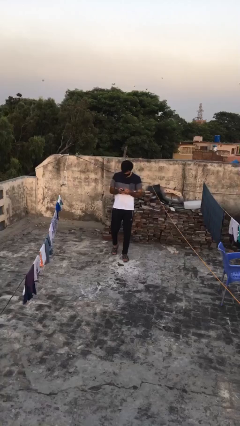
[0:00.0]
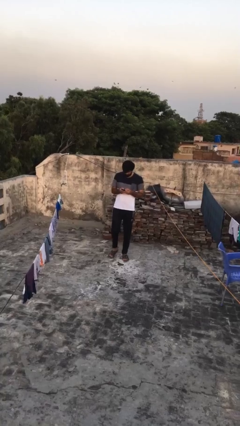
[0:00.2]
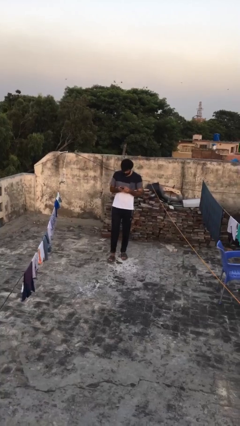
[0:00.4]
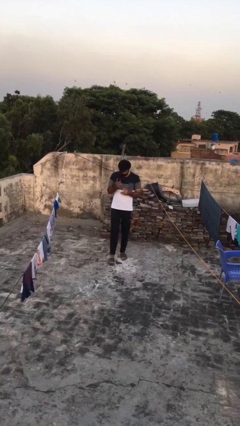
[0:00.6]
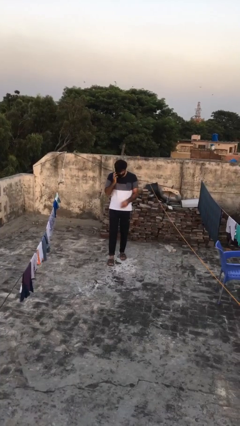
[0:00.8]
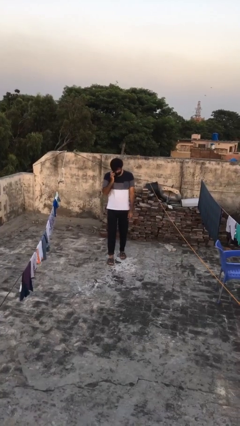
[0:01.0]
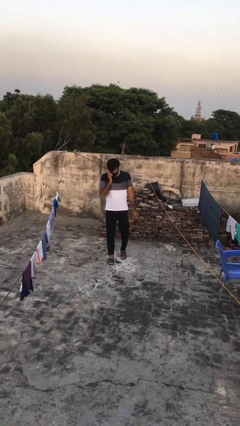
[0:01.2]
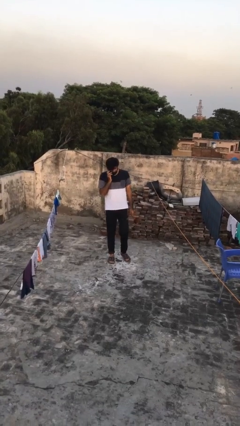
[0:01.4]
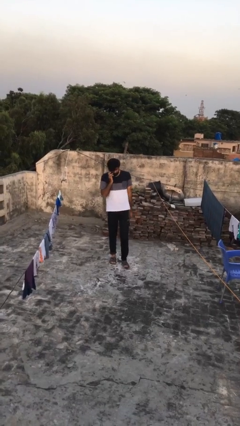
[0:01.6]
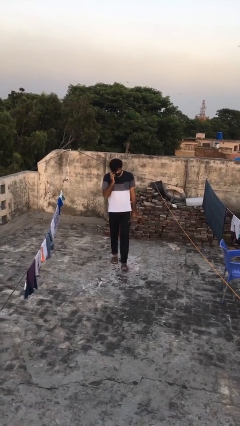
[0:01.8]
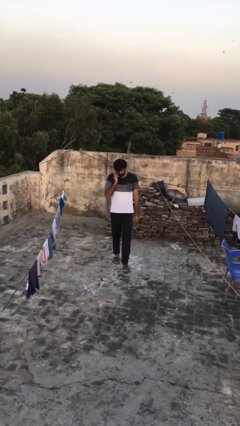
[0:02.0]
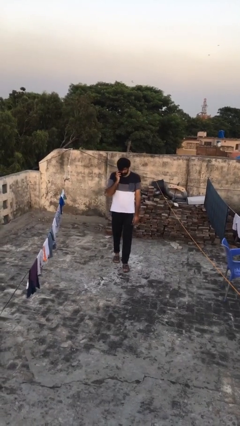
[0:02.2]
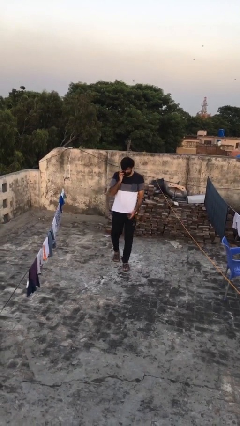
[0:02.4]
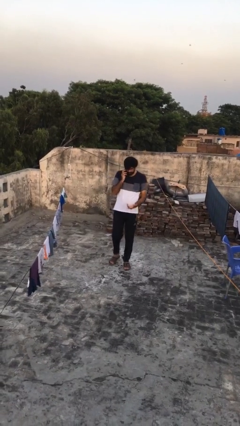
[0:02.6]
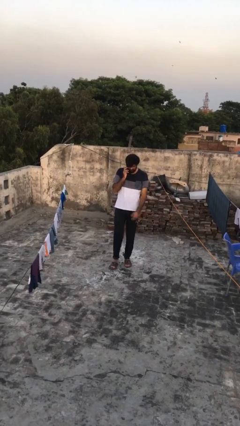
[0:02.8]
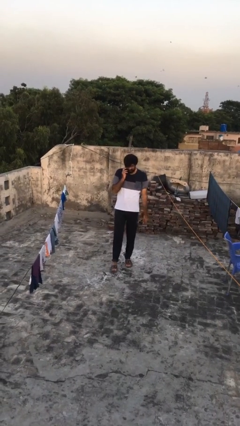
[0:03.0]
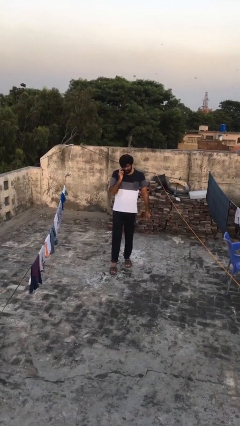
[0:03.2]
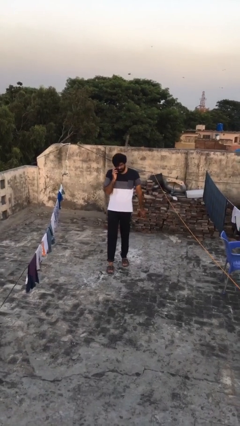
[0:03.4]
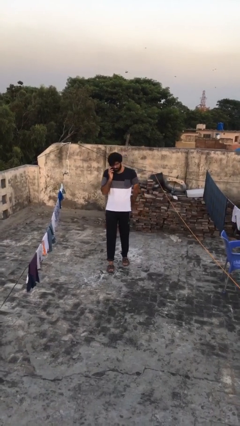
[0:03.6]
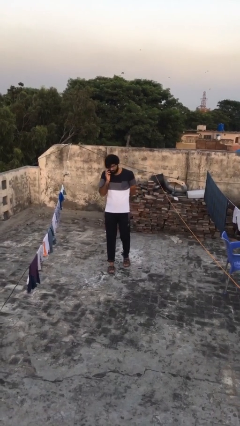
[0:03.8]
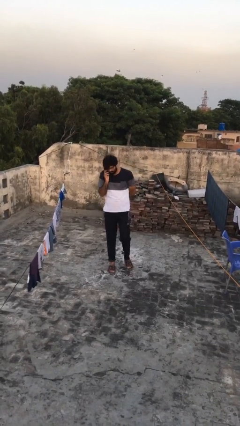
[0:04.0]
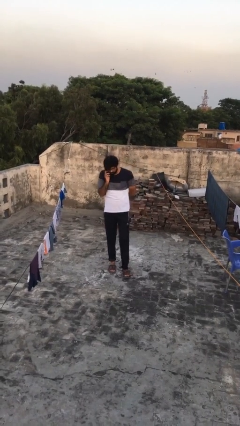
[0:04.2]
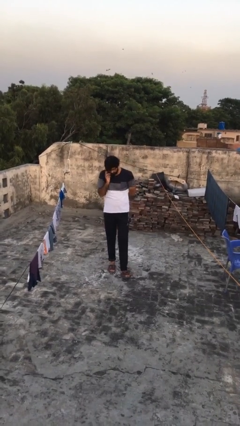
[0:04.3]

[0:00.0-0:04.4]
person talks on phone

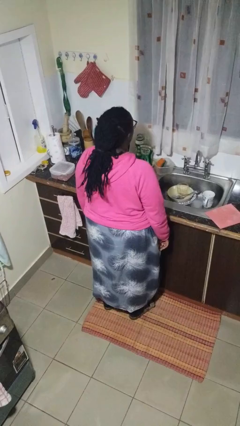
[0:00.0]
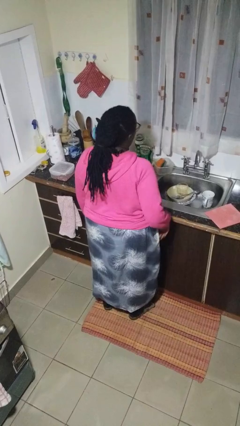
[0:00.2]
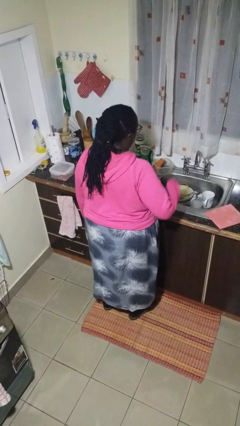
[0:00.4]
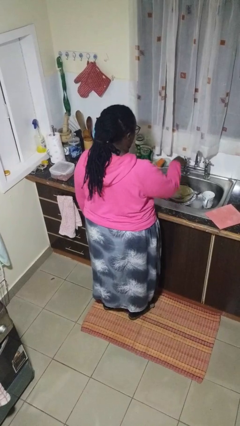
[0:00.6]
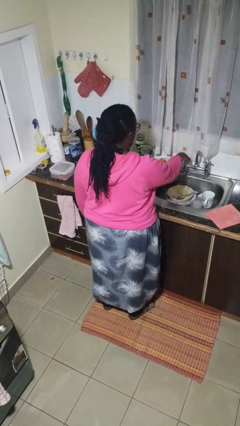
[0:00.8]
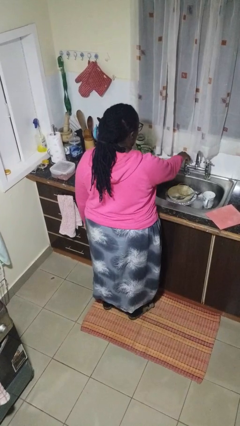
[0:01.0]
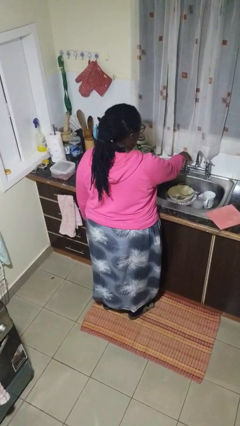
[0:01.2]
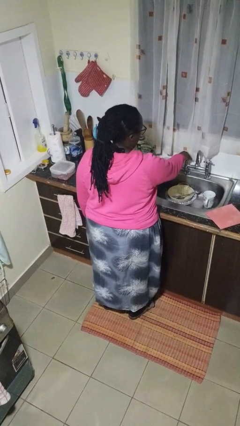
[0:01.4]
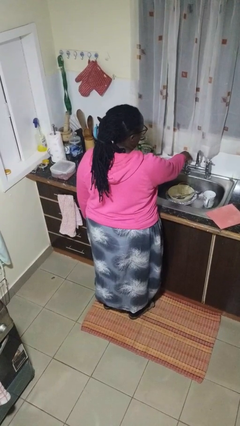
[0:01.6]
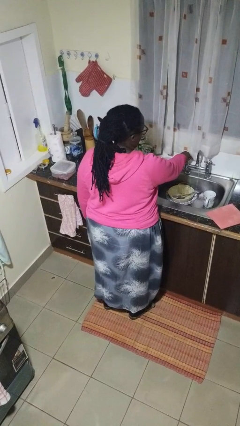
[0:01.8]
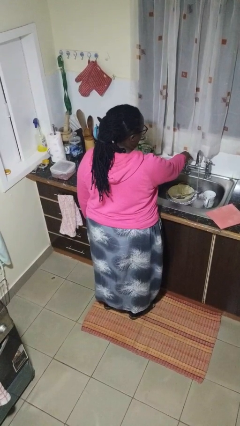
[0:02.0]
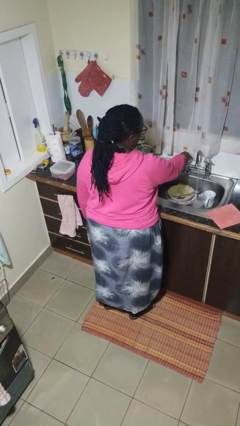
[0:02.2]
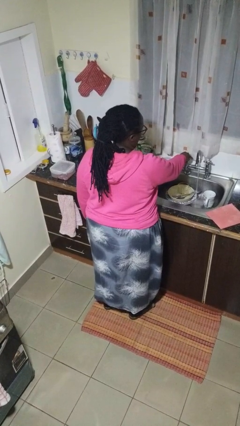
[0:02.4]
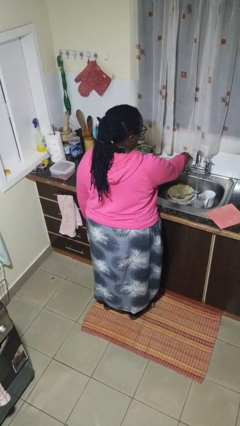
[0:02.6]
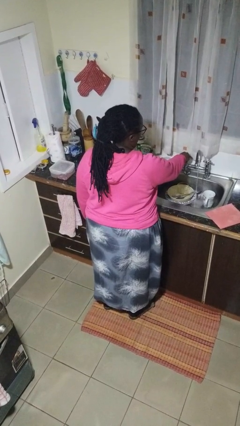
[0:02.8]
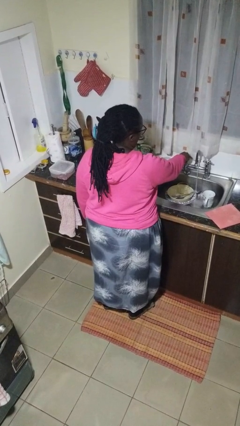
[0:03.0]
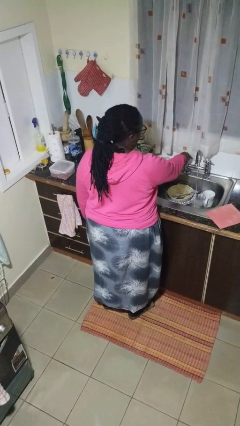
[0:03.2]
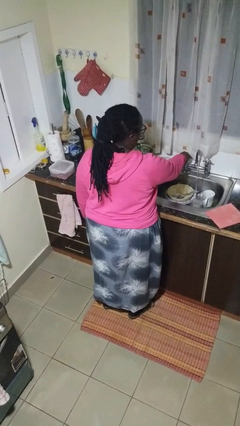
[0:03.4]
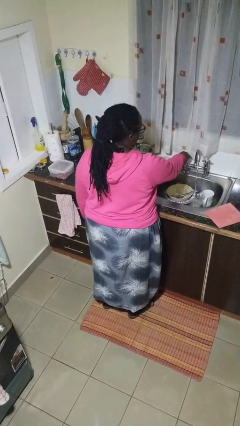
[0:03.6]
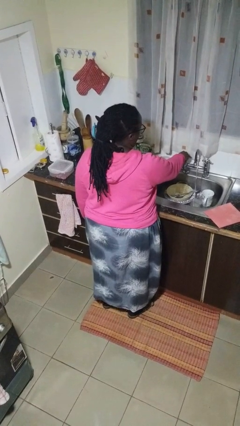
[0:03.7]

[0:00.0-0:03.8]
person turns on faucet

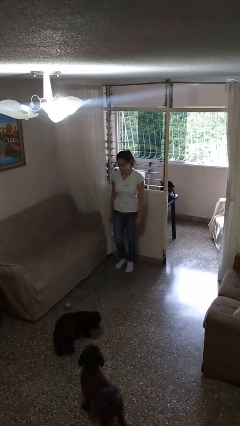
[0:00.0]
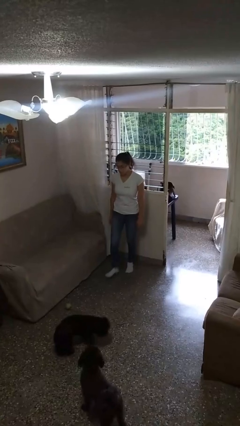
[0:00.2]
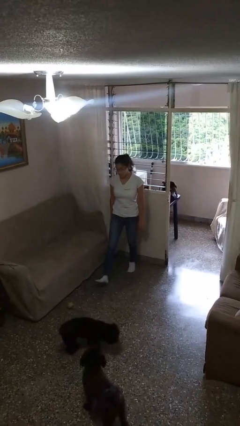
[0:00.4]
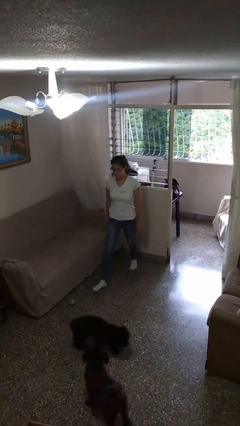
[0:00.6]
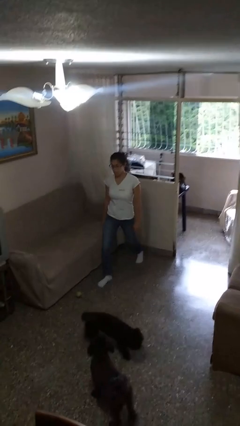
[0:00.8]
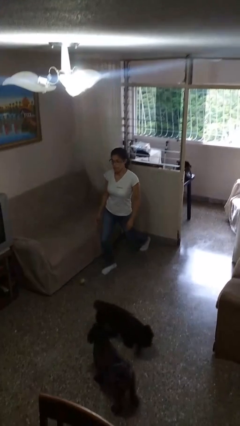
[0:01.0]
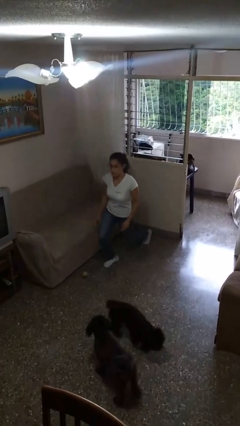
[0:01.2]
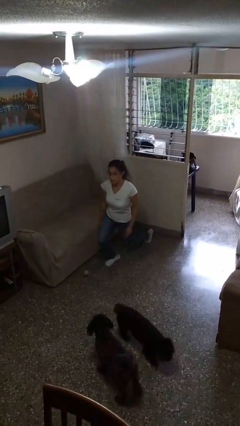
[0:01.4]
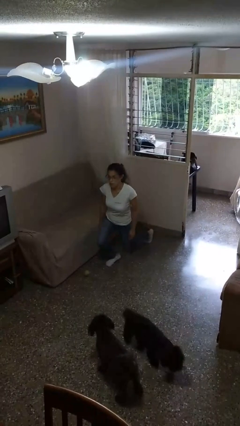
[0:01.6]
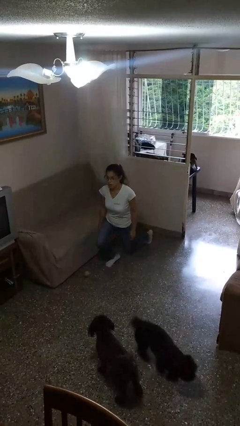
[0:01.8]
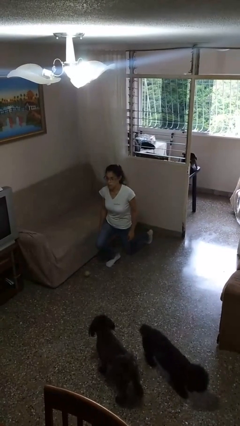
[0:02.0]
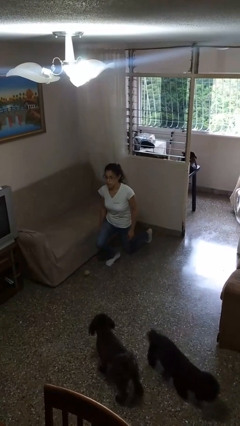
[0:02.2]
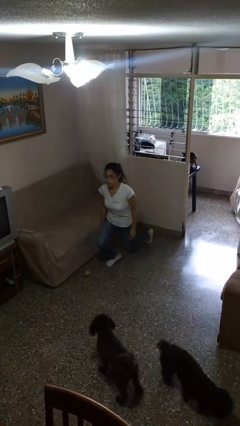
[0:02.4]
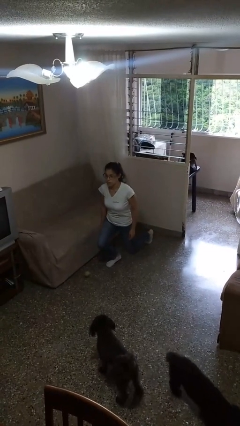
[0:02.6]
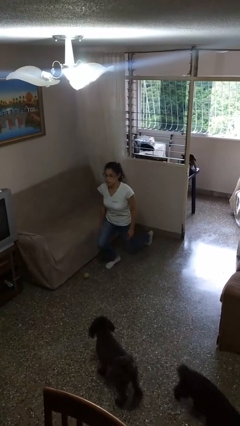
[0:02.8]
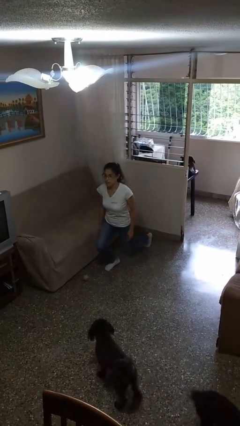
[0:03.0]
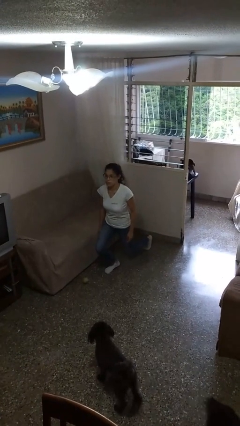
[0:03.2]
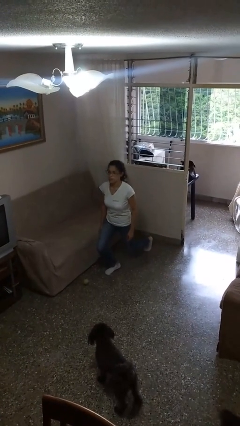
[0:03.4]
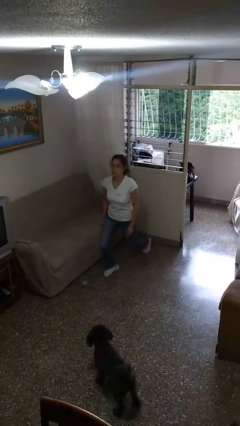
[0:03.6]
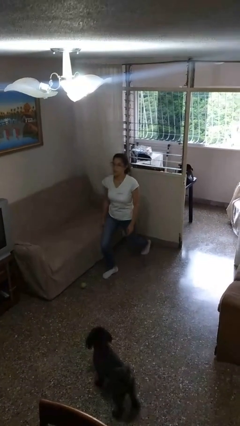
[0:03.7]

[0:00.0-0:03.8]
person exercises with lunges

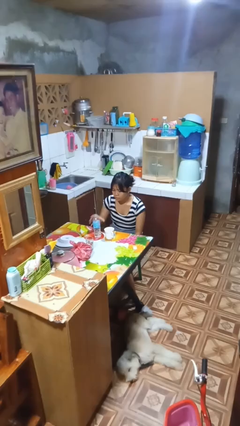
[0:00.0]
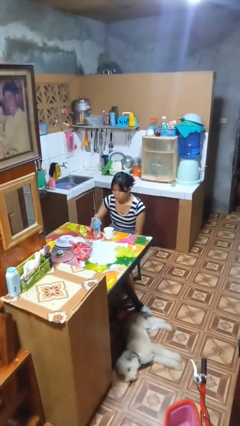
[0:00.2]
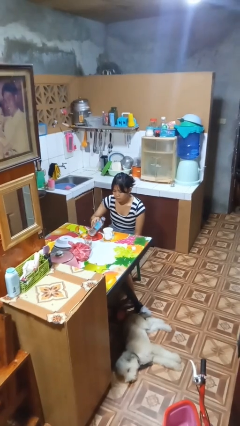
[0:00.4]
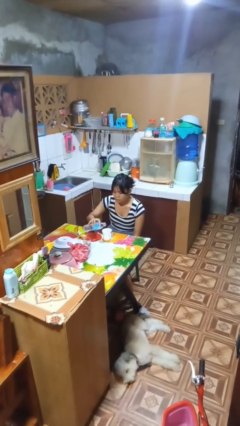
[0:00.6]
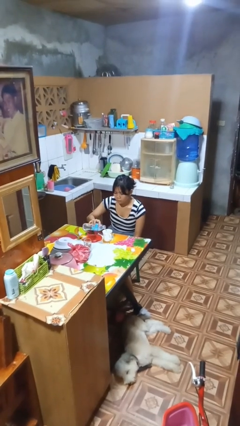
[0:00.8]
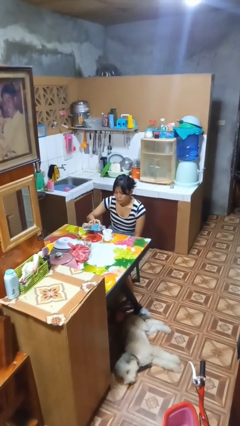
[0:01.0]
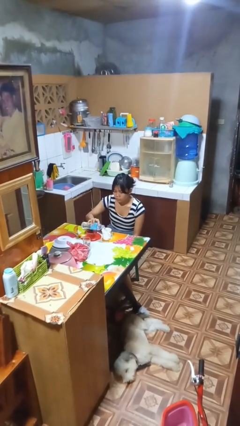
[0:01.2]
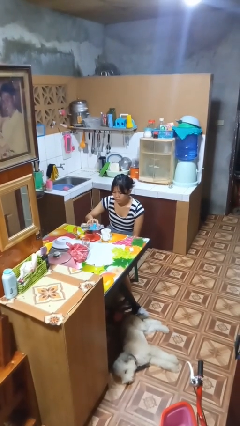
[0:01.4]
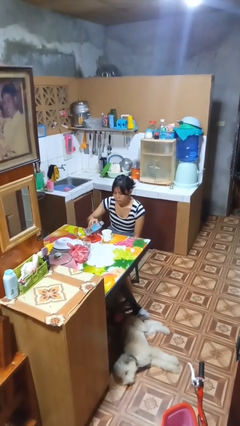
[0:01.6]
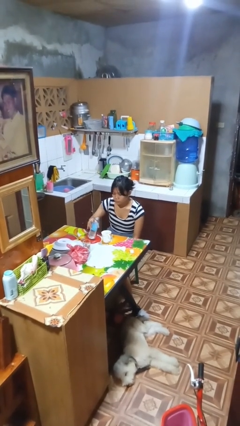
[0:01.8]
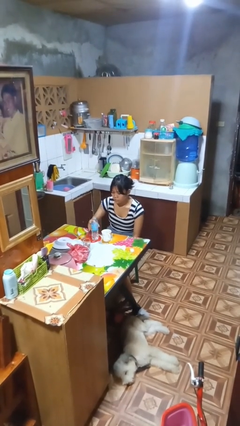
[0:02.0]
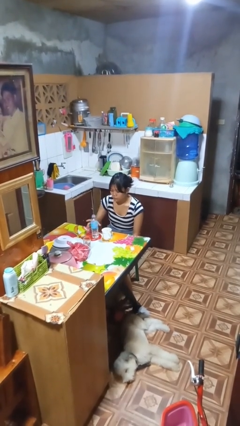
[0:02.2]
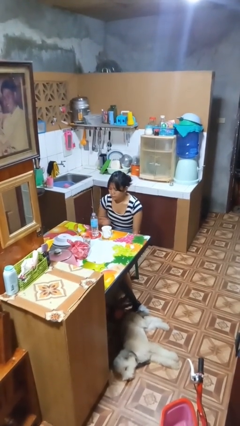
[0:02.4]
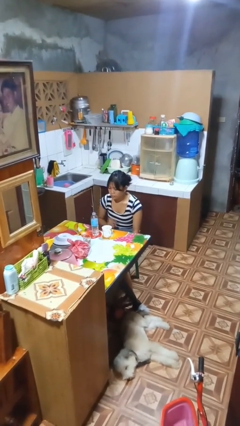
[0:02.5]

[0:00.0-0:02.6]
person pours liquid into cup

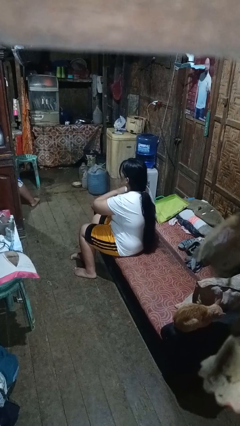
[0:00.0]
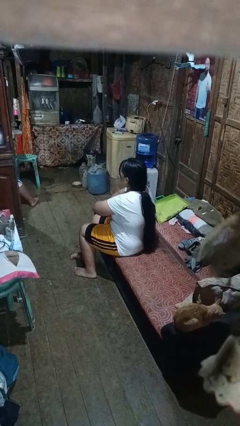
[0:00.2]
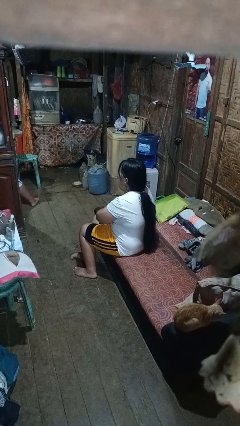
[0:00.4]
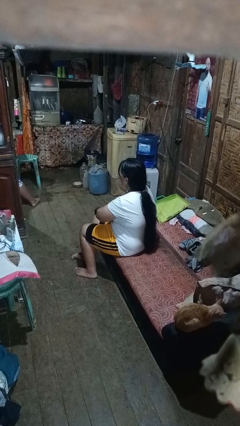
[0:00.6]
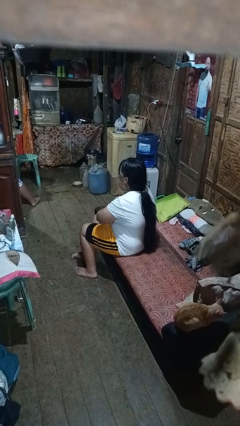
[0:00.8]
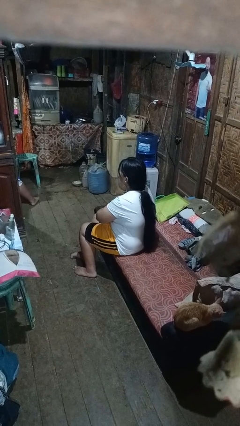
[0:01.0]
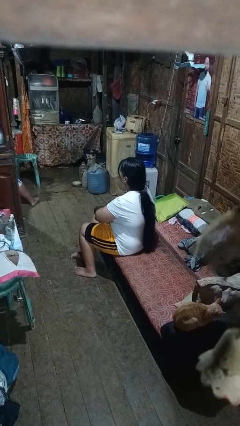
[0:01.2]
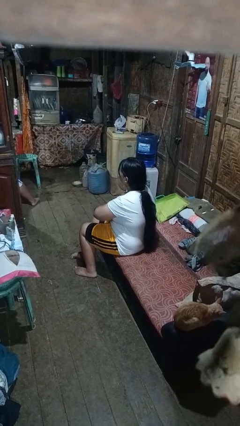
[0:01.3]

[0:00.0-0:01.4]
person gestures arms x

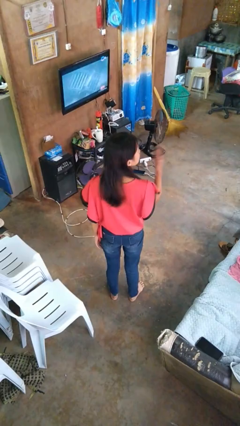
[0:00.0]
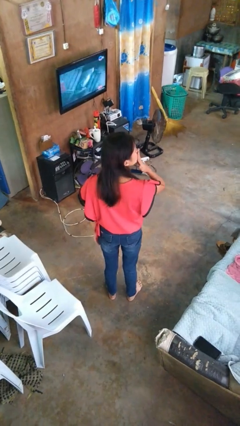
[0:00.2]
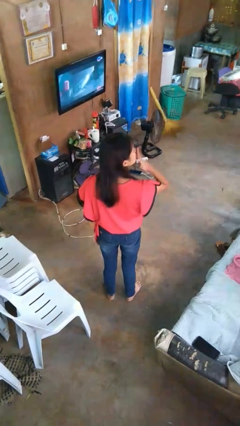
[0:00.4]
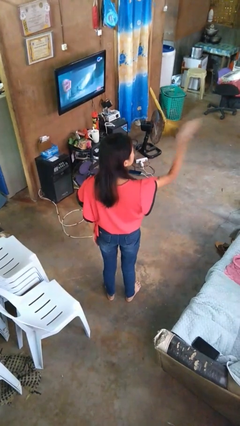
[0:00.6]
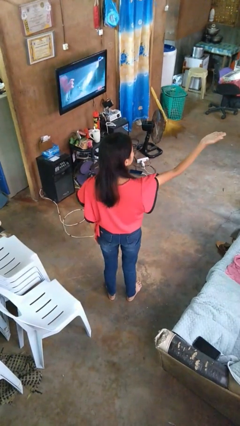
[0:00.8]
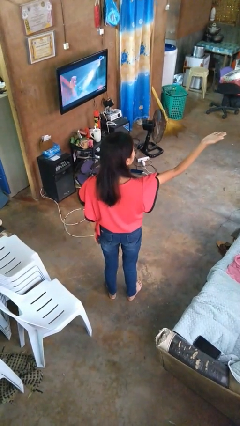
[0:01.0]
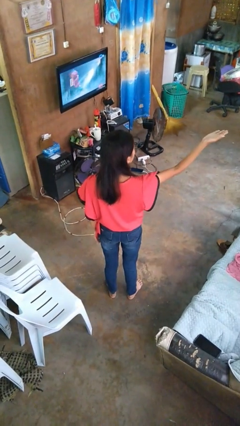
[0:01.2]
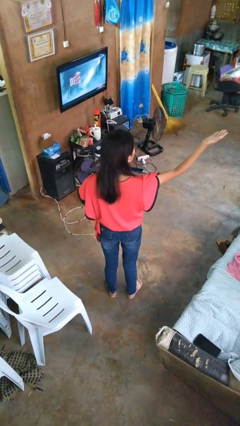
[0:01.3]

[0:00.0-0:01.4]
person gestures blow kiss
